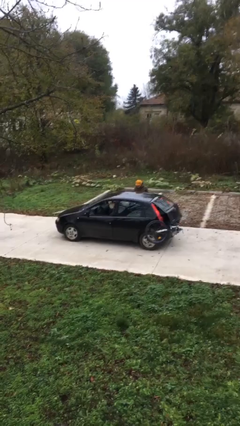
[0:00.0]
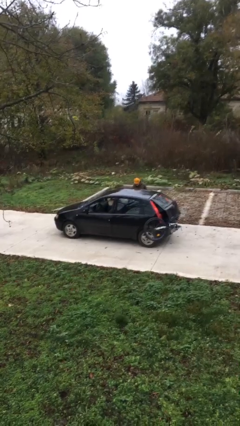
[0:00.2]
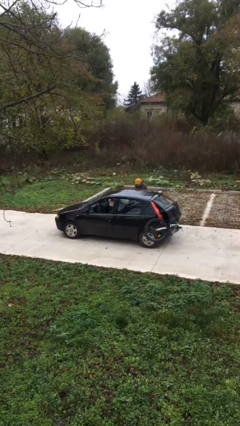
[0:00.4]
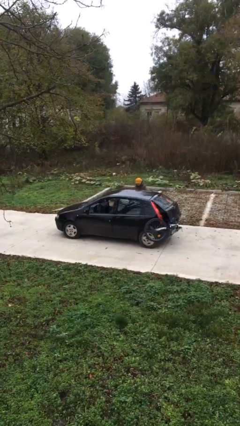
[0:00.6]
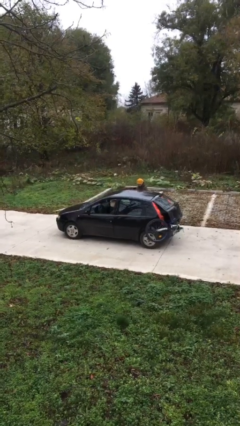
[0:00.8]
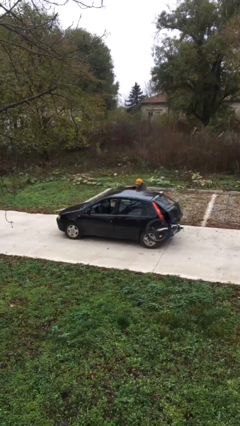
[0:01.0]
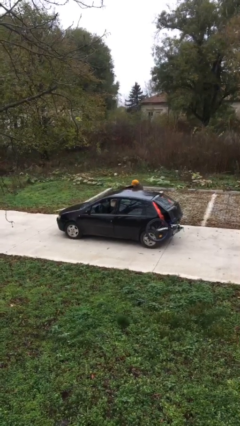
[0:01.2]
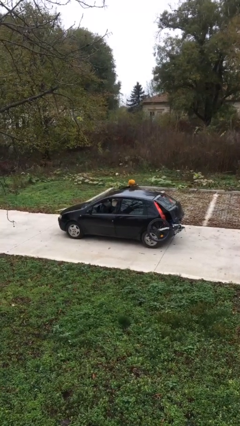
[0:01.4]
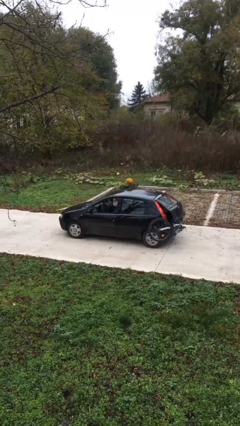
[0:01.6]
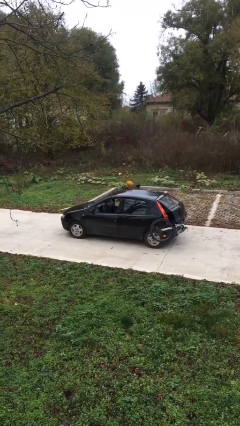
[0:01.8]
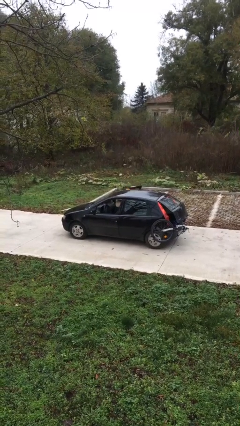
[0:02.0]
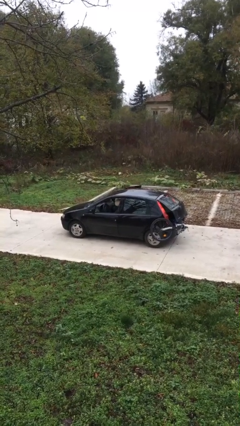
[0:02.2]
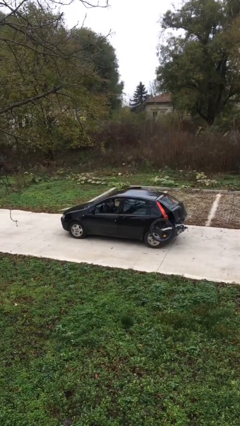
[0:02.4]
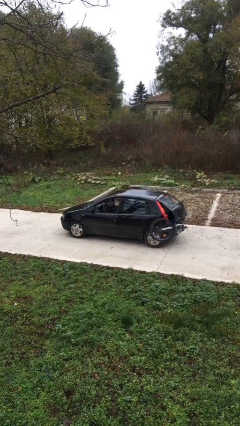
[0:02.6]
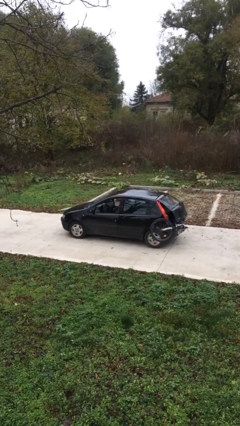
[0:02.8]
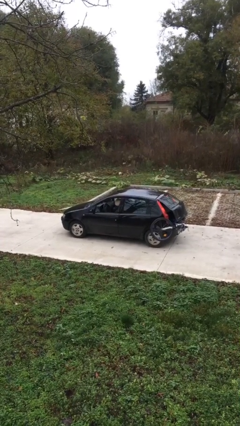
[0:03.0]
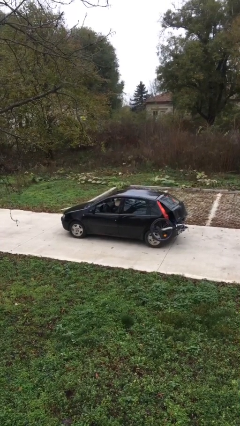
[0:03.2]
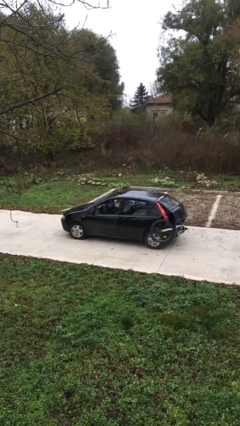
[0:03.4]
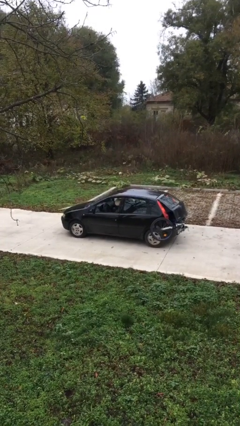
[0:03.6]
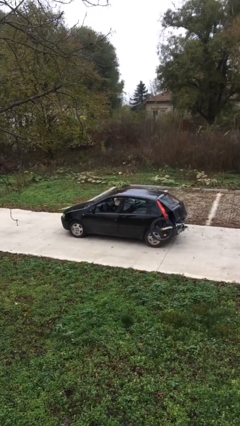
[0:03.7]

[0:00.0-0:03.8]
car picks up person

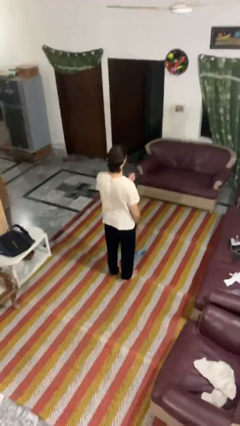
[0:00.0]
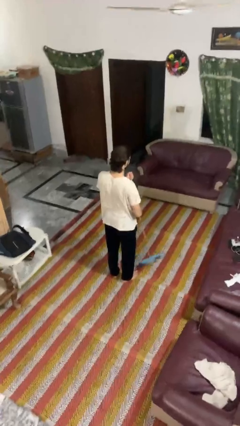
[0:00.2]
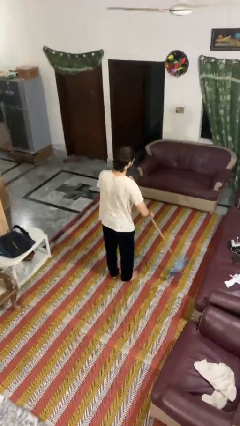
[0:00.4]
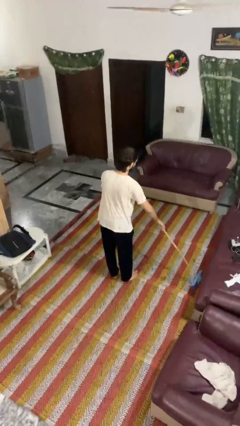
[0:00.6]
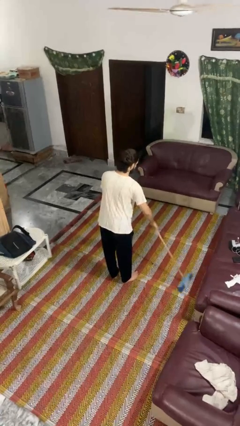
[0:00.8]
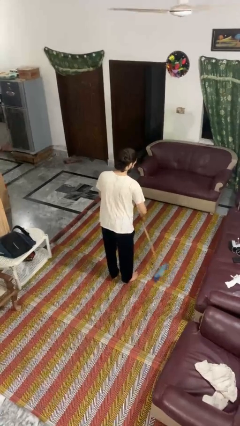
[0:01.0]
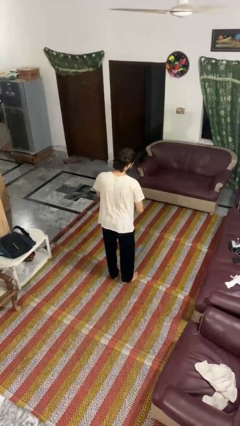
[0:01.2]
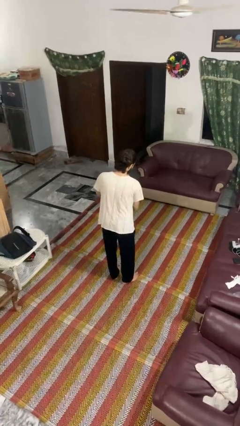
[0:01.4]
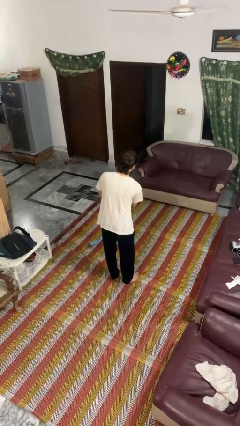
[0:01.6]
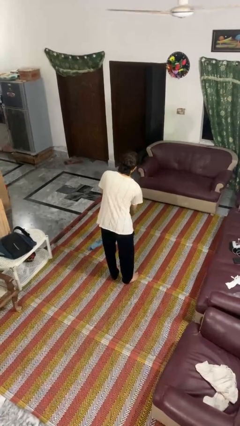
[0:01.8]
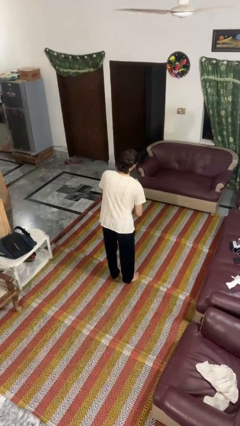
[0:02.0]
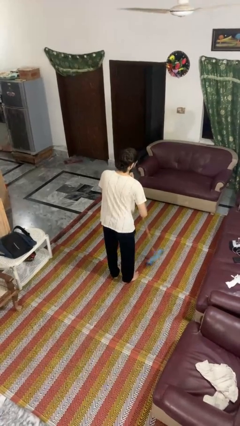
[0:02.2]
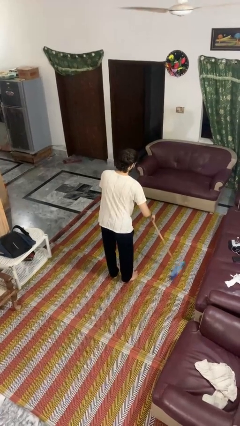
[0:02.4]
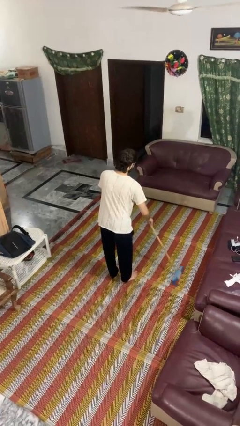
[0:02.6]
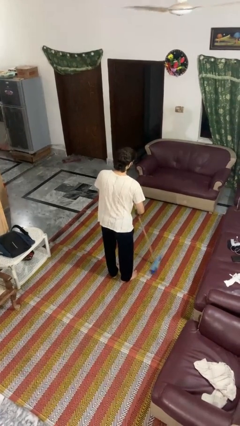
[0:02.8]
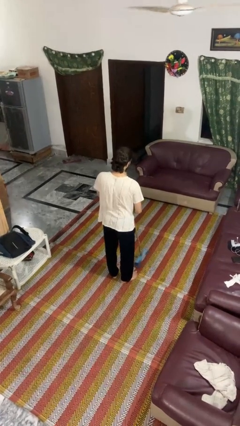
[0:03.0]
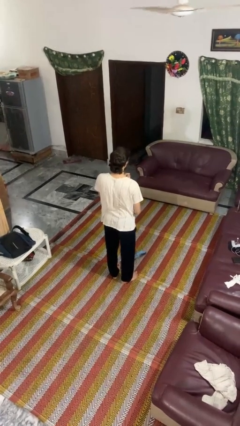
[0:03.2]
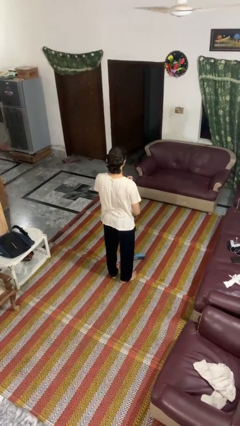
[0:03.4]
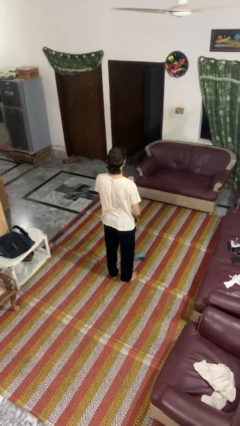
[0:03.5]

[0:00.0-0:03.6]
person sweeps floor

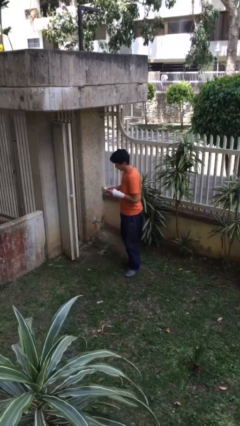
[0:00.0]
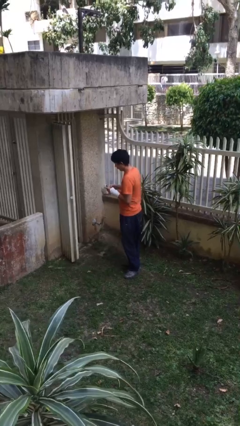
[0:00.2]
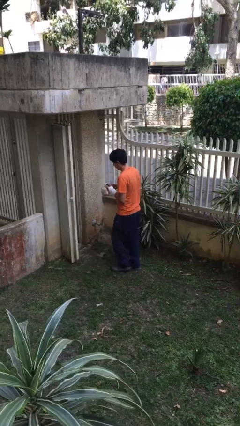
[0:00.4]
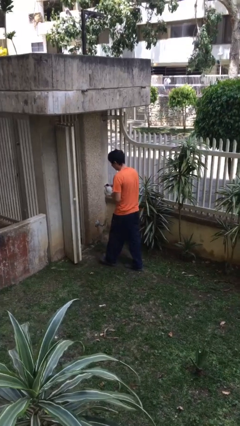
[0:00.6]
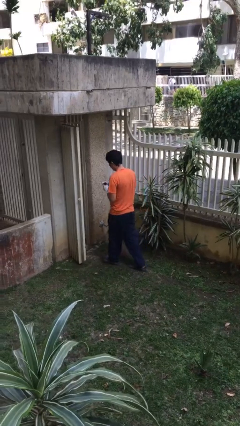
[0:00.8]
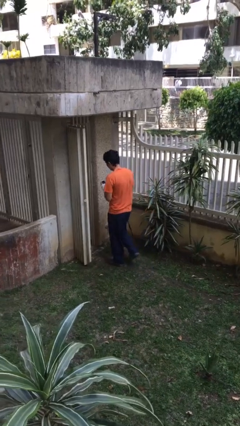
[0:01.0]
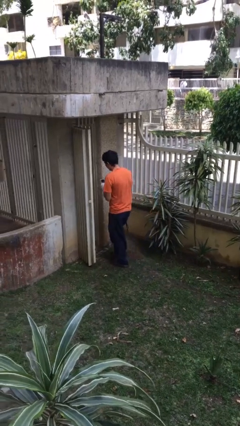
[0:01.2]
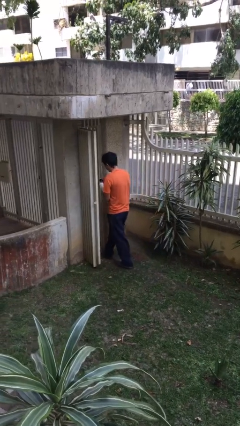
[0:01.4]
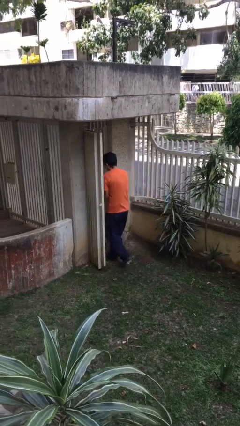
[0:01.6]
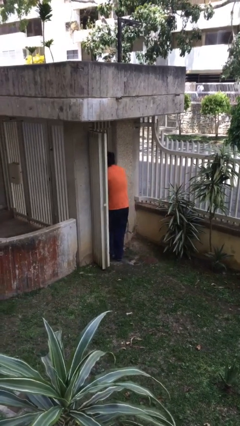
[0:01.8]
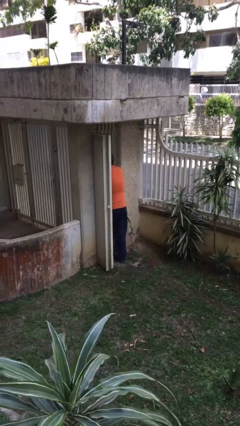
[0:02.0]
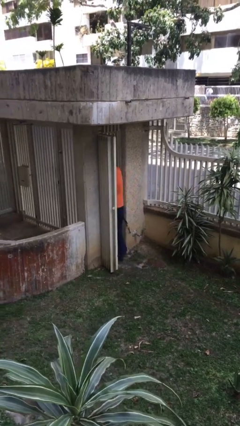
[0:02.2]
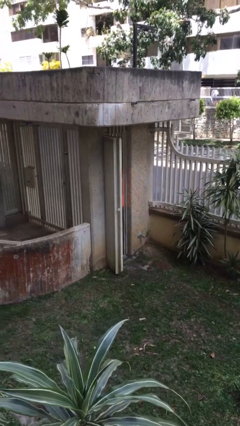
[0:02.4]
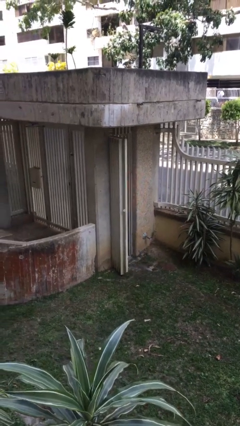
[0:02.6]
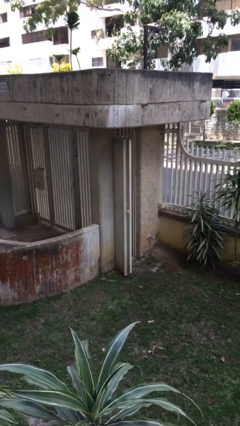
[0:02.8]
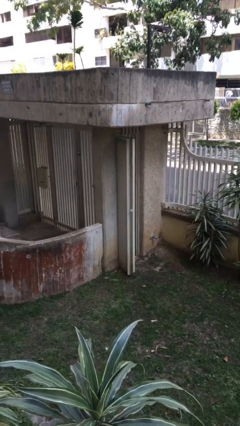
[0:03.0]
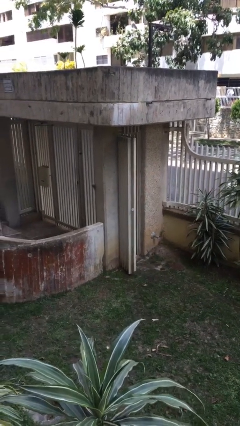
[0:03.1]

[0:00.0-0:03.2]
person exits scene through structure

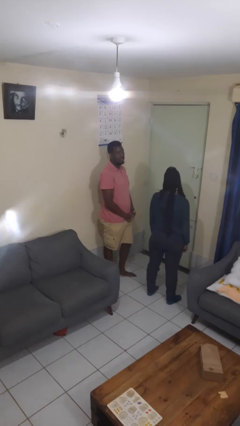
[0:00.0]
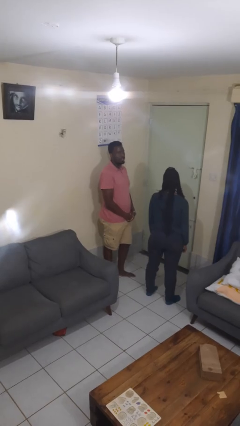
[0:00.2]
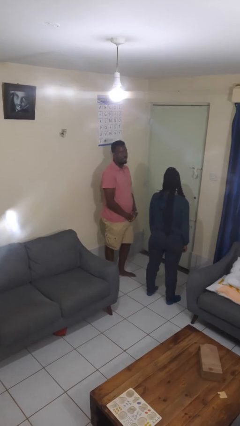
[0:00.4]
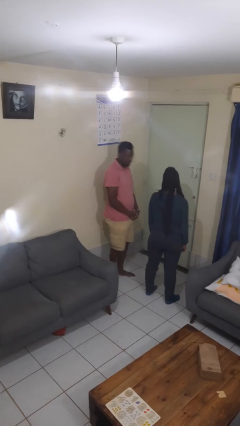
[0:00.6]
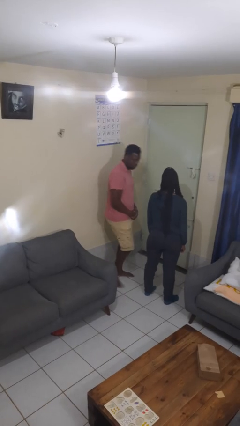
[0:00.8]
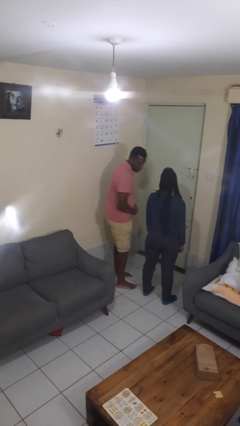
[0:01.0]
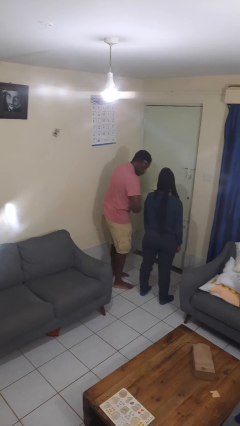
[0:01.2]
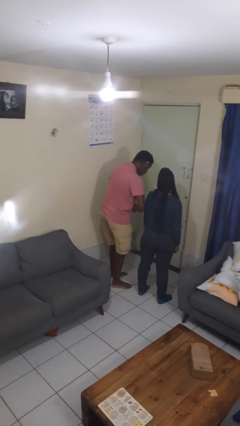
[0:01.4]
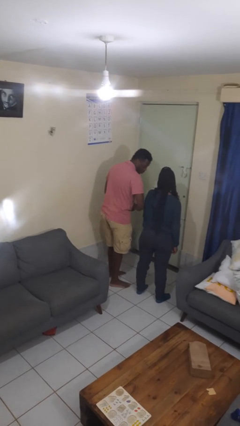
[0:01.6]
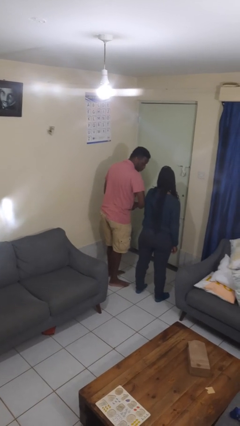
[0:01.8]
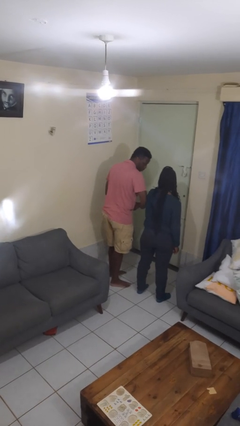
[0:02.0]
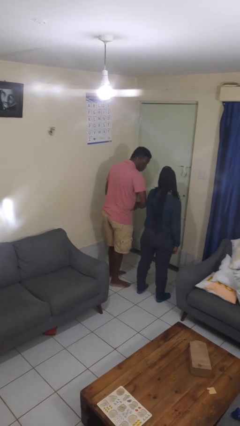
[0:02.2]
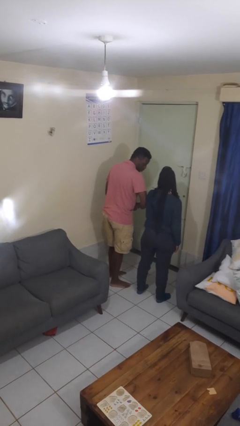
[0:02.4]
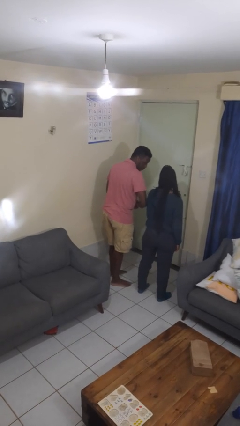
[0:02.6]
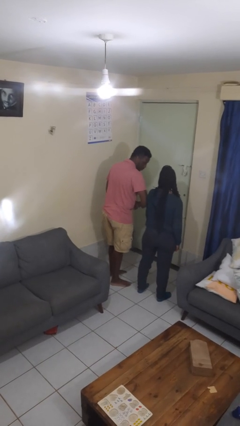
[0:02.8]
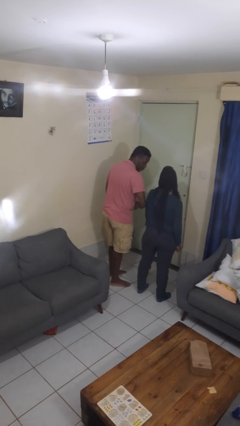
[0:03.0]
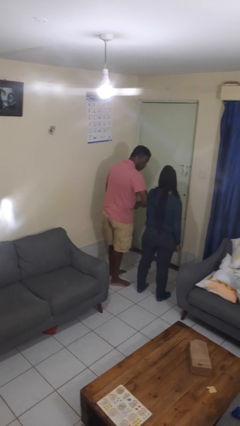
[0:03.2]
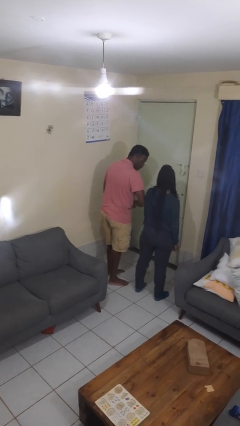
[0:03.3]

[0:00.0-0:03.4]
person nudges person with elbow

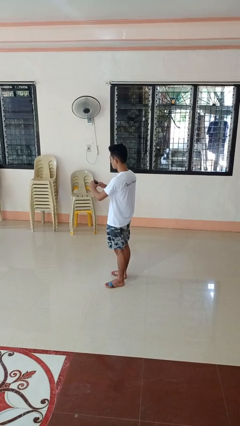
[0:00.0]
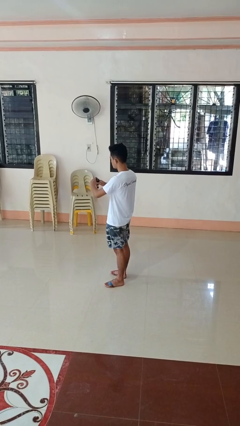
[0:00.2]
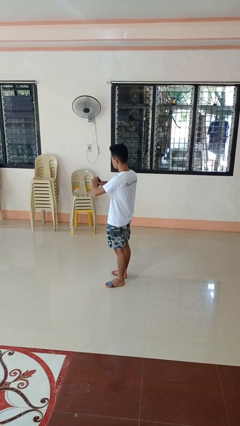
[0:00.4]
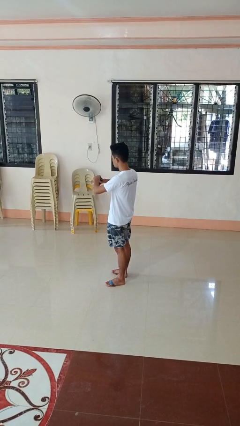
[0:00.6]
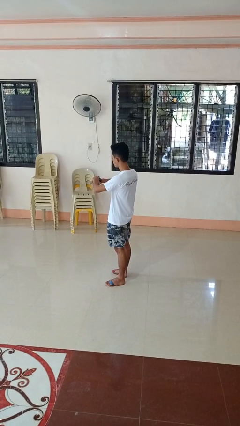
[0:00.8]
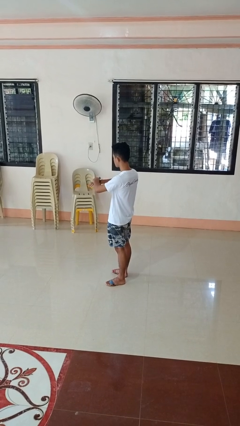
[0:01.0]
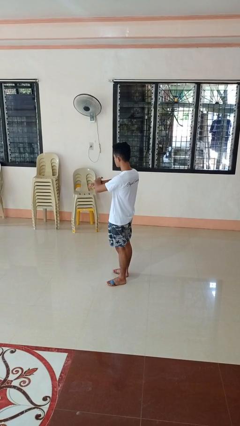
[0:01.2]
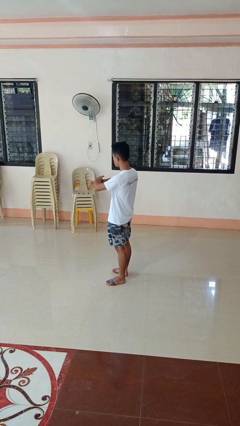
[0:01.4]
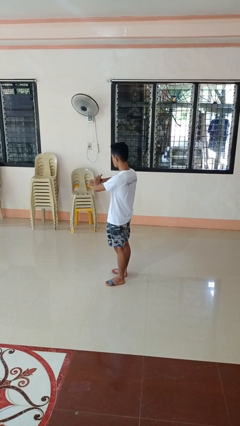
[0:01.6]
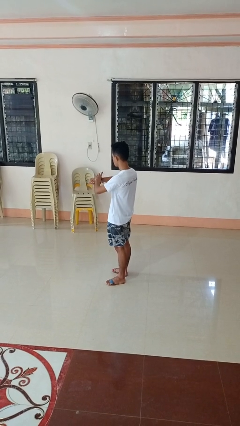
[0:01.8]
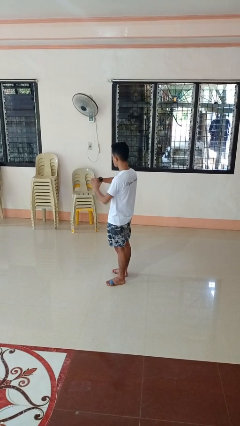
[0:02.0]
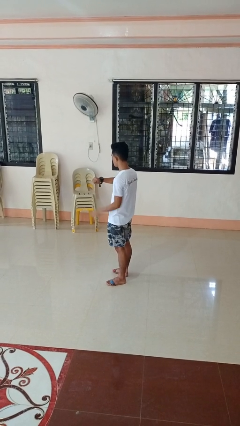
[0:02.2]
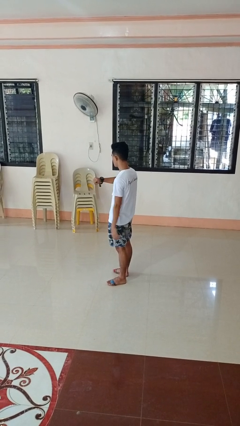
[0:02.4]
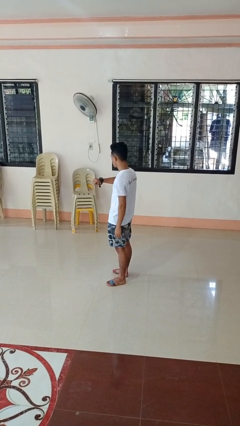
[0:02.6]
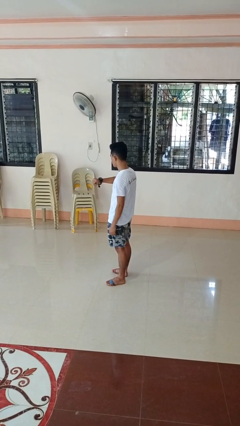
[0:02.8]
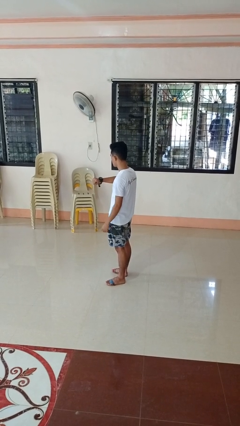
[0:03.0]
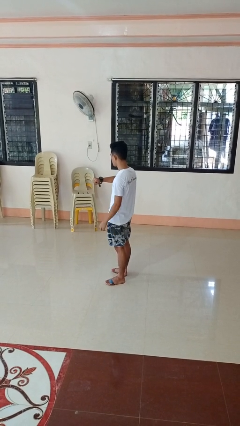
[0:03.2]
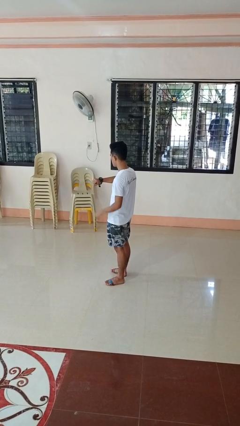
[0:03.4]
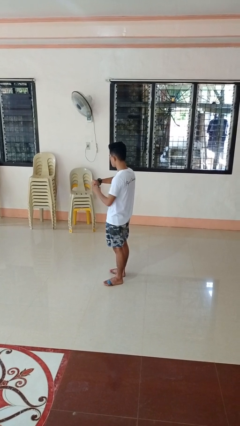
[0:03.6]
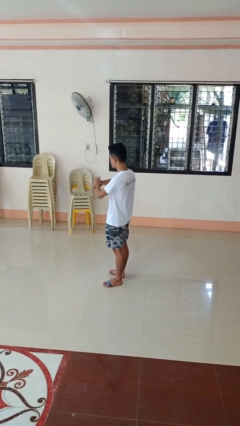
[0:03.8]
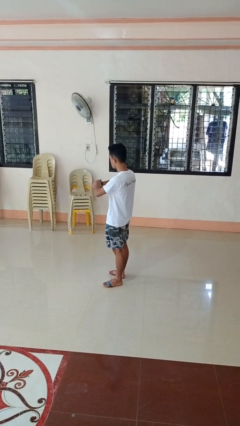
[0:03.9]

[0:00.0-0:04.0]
person puts on wristwatch
